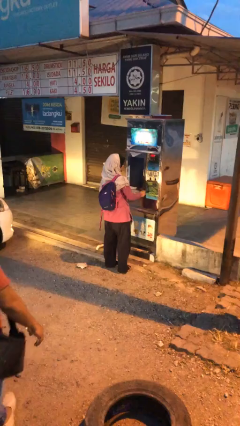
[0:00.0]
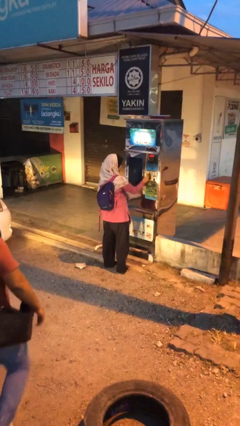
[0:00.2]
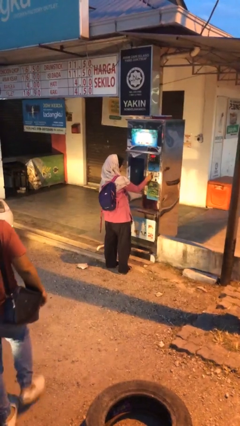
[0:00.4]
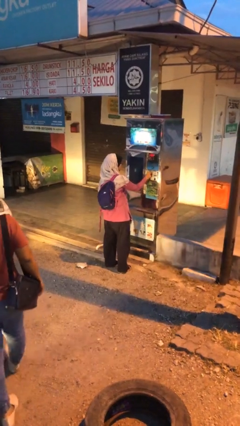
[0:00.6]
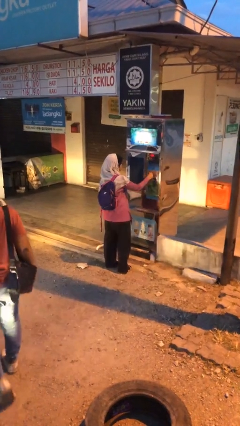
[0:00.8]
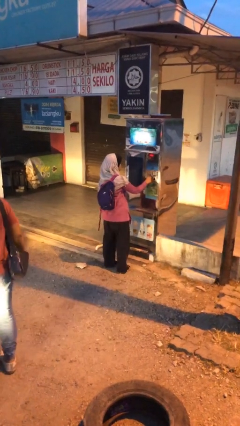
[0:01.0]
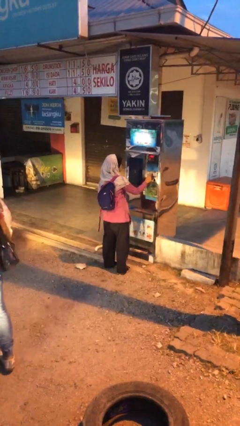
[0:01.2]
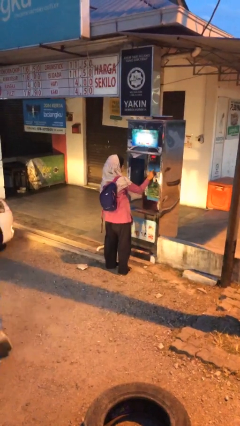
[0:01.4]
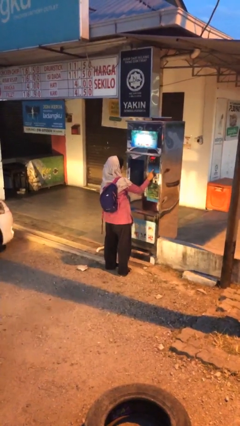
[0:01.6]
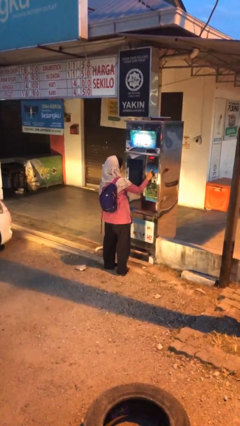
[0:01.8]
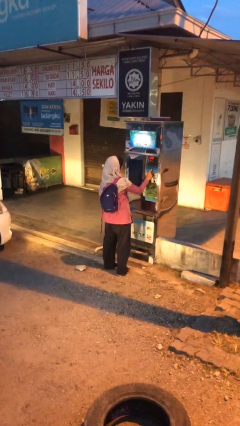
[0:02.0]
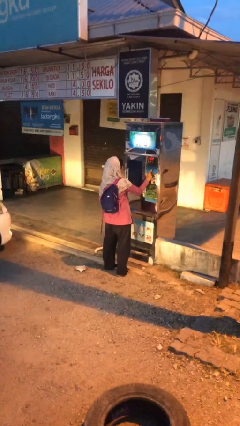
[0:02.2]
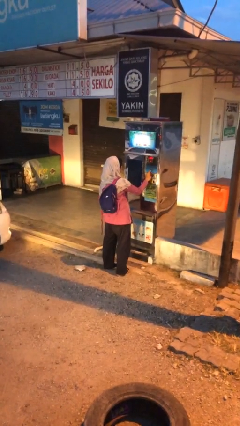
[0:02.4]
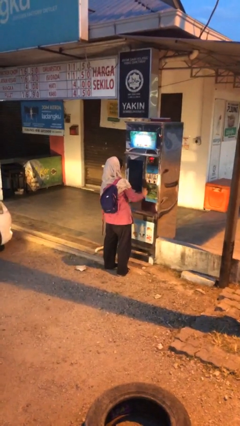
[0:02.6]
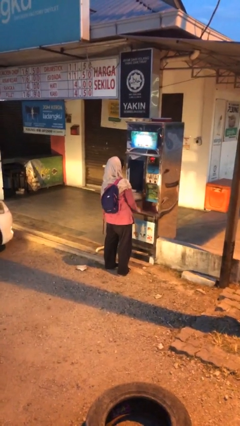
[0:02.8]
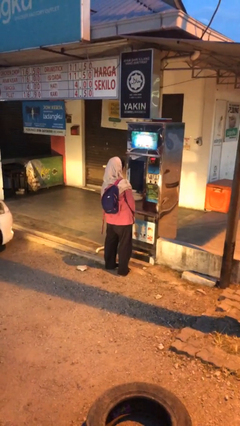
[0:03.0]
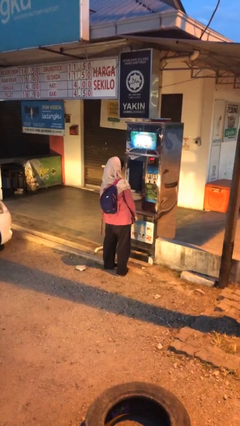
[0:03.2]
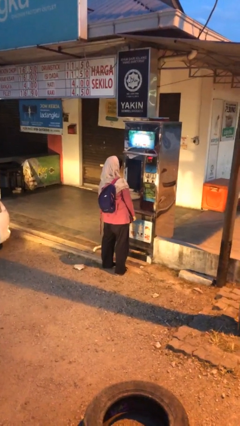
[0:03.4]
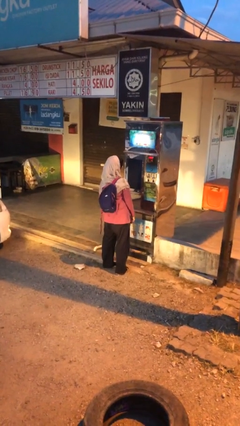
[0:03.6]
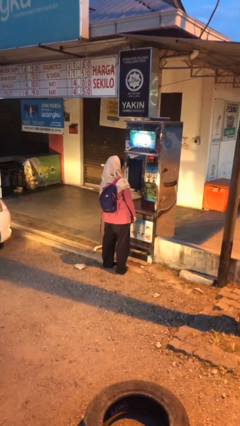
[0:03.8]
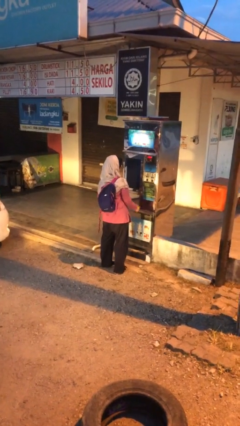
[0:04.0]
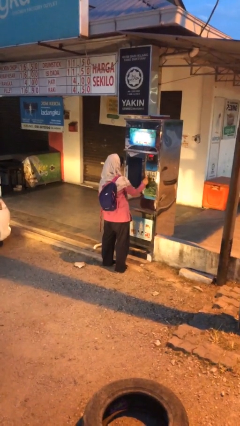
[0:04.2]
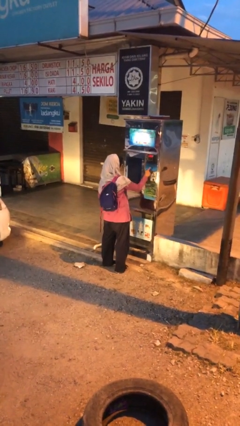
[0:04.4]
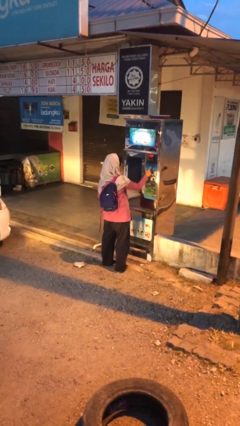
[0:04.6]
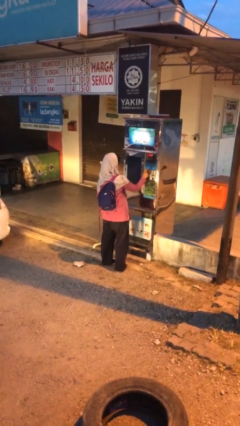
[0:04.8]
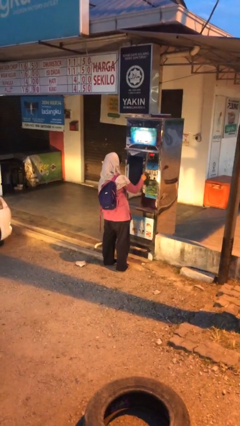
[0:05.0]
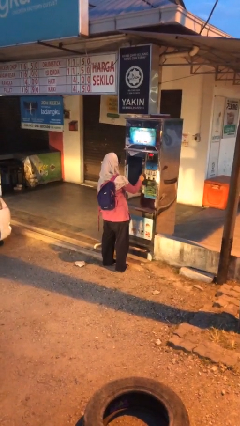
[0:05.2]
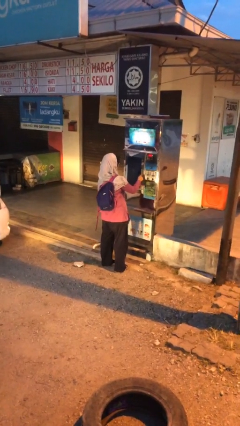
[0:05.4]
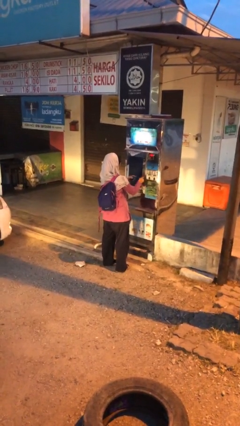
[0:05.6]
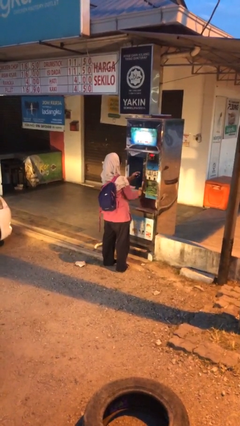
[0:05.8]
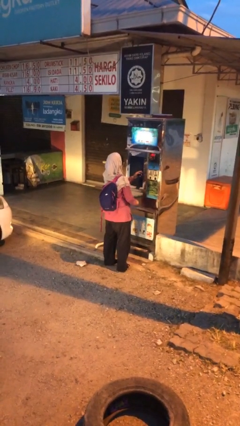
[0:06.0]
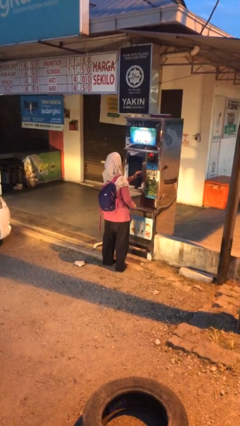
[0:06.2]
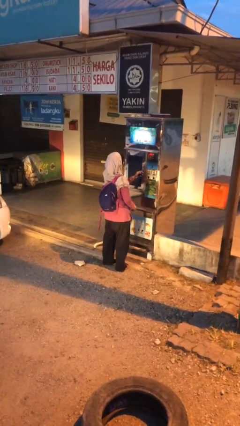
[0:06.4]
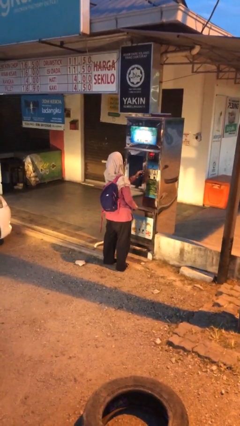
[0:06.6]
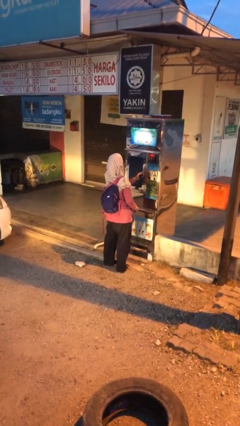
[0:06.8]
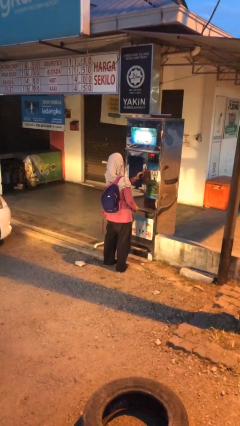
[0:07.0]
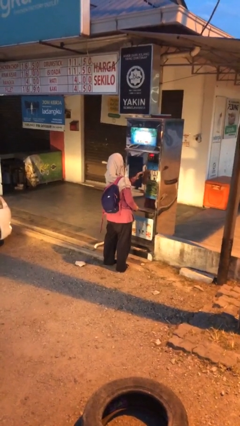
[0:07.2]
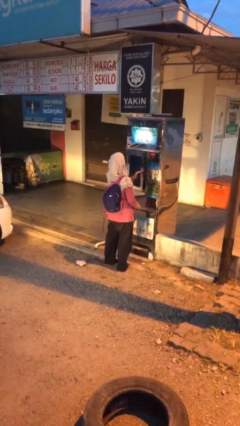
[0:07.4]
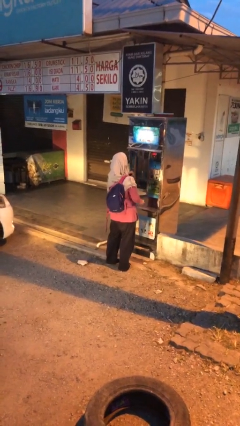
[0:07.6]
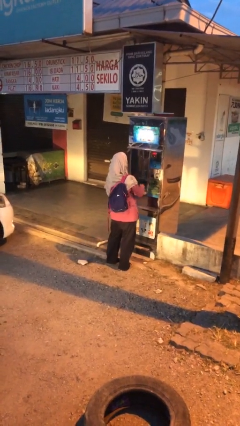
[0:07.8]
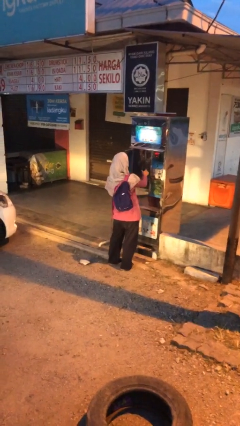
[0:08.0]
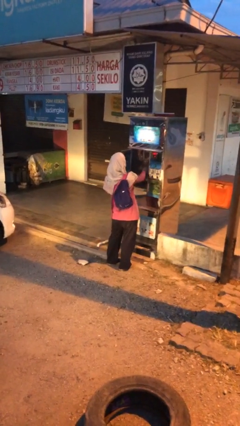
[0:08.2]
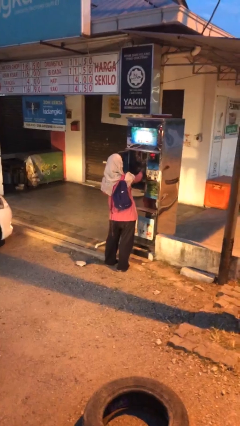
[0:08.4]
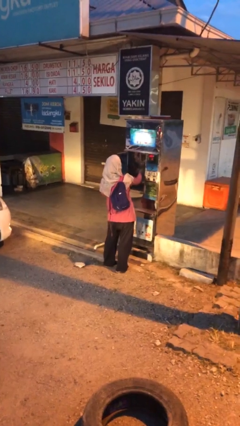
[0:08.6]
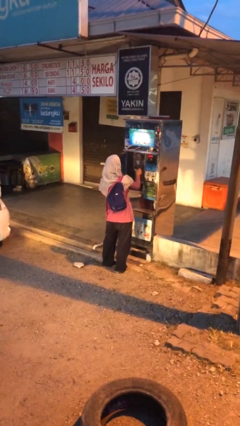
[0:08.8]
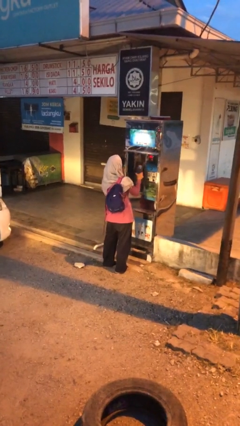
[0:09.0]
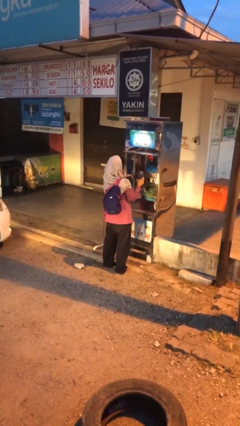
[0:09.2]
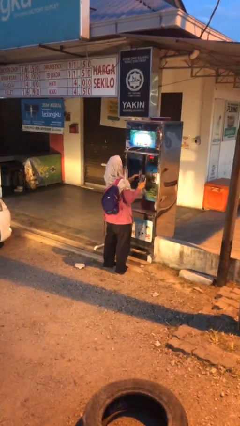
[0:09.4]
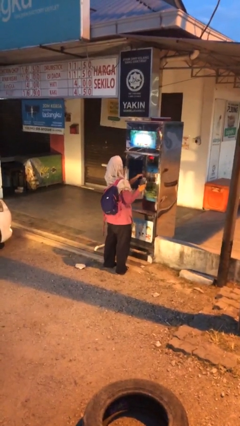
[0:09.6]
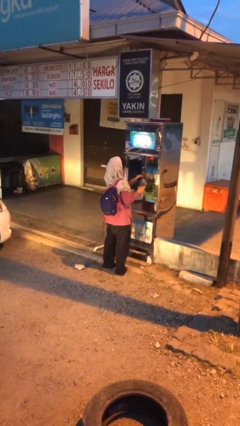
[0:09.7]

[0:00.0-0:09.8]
person purchases from machine

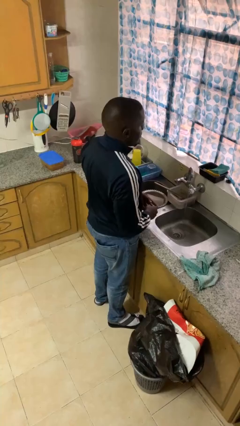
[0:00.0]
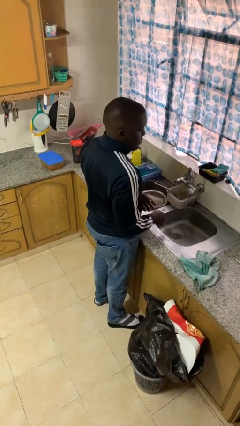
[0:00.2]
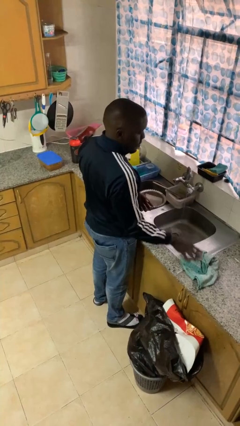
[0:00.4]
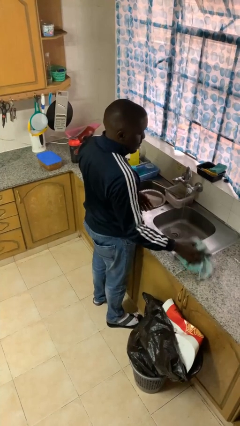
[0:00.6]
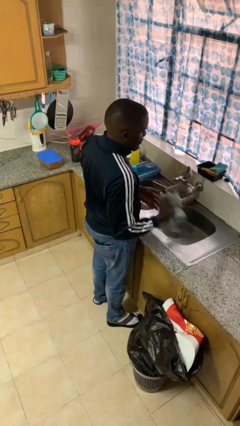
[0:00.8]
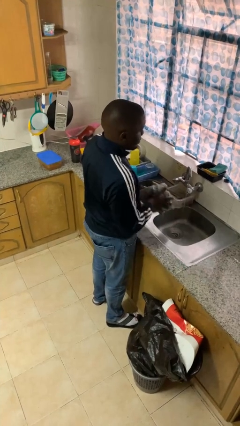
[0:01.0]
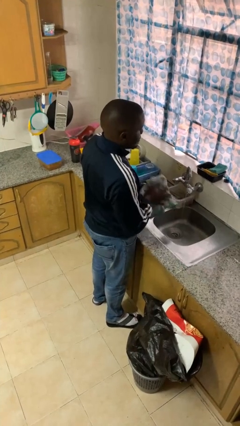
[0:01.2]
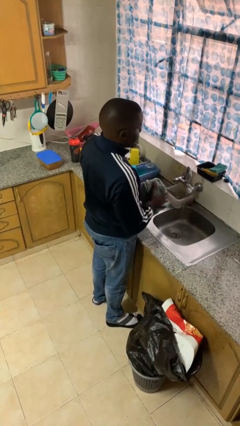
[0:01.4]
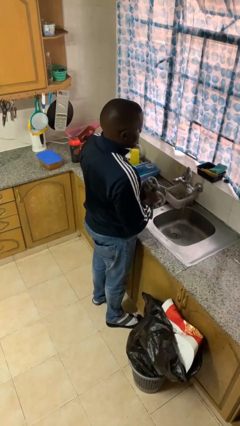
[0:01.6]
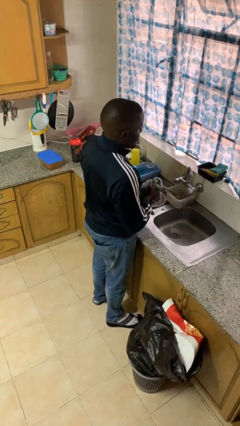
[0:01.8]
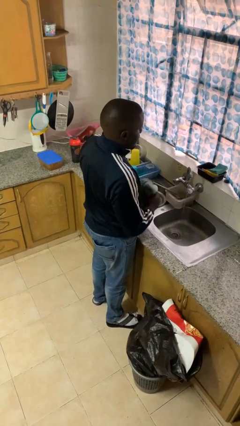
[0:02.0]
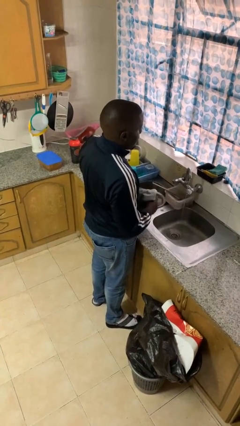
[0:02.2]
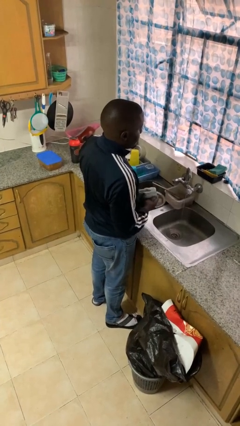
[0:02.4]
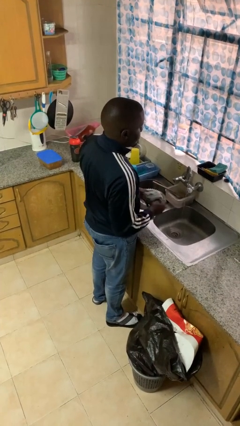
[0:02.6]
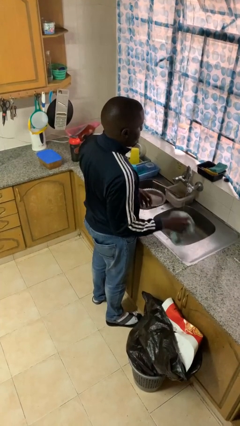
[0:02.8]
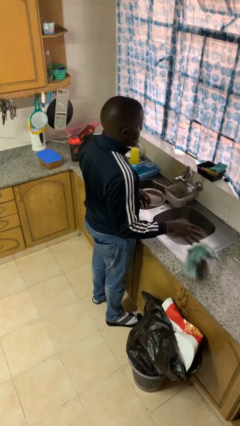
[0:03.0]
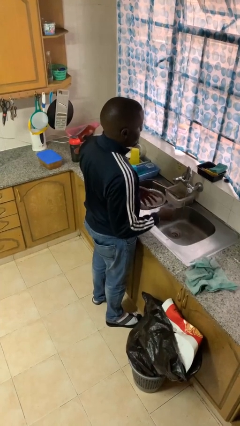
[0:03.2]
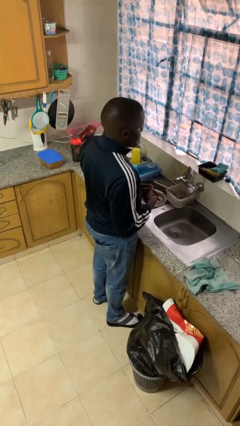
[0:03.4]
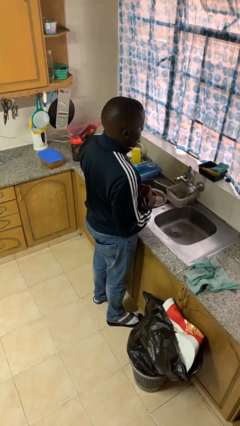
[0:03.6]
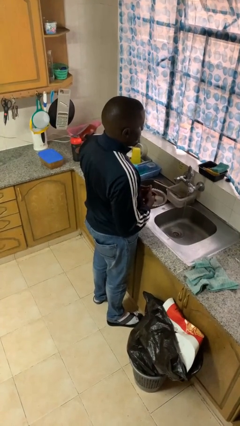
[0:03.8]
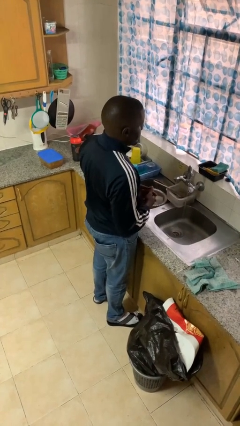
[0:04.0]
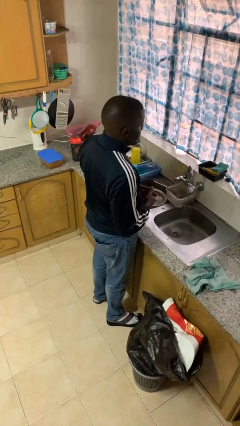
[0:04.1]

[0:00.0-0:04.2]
person dries hands with towel

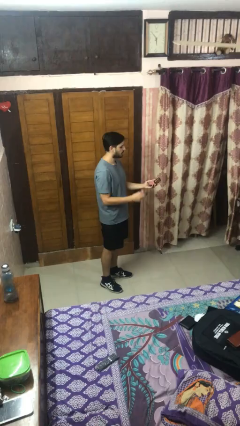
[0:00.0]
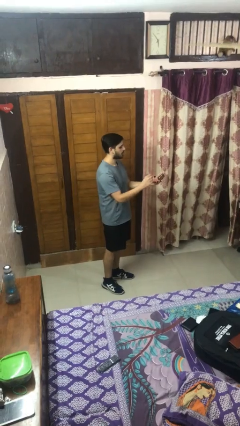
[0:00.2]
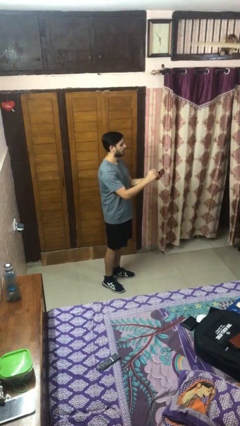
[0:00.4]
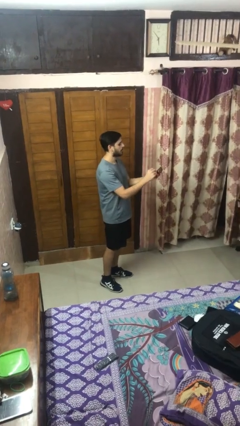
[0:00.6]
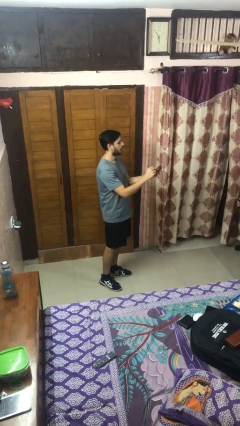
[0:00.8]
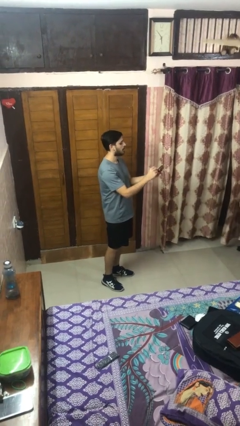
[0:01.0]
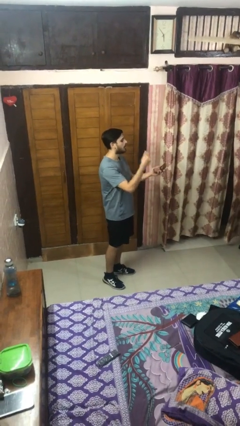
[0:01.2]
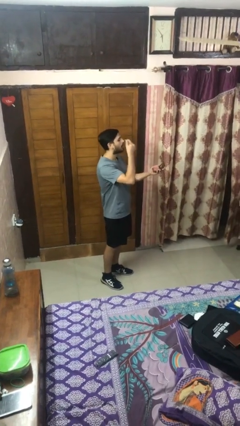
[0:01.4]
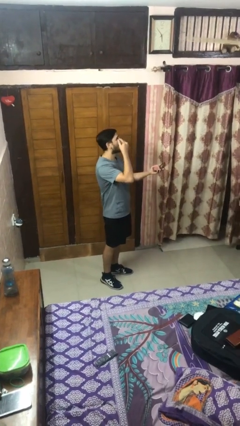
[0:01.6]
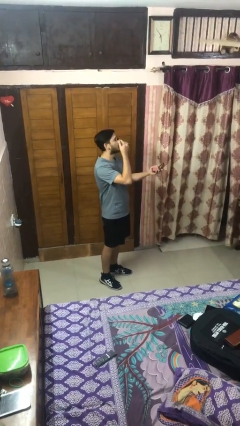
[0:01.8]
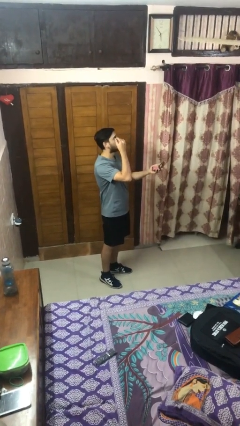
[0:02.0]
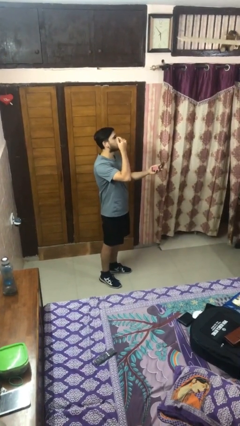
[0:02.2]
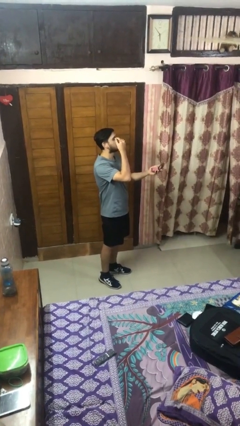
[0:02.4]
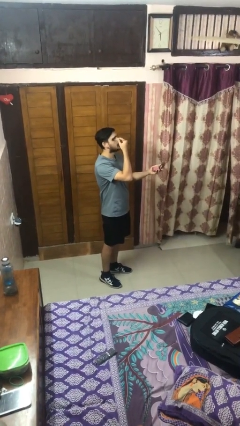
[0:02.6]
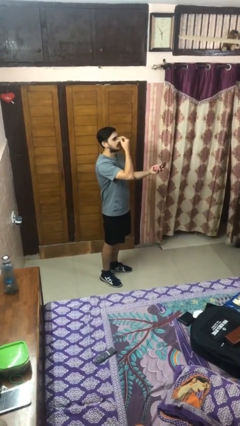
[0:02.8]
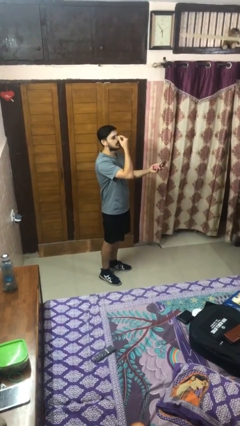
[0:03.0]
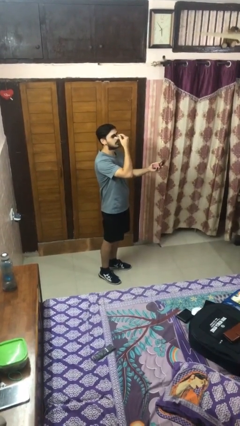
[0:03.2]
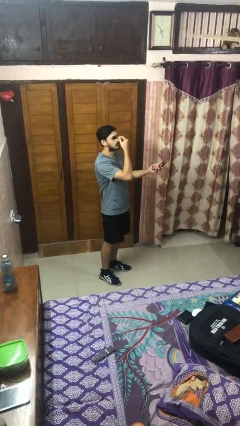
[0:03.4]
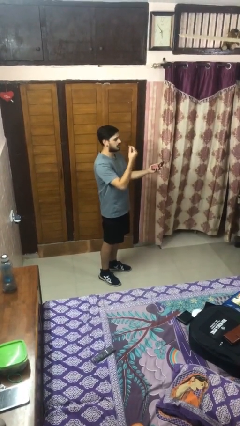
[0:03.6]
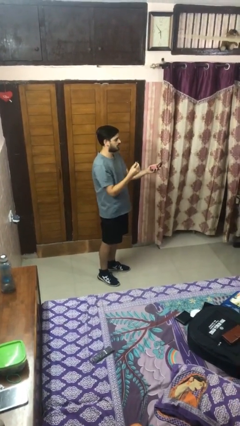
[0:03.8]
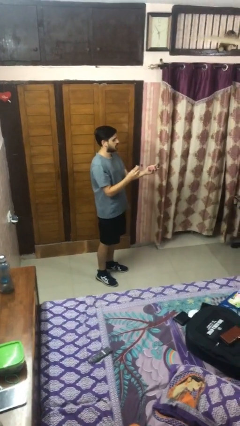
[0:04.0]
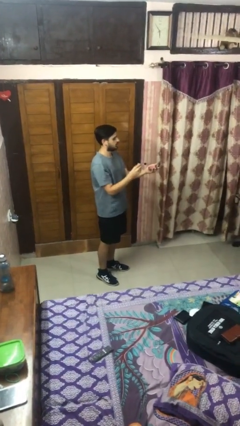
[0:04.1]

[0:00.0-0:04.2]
person applies eye makeup
